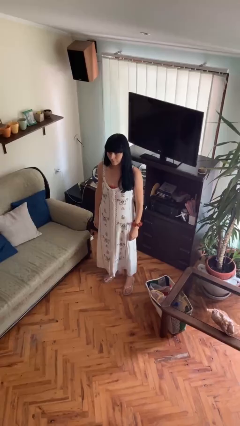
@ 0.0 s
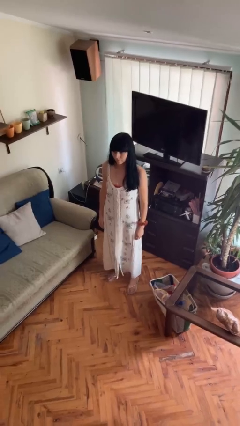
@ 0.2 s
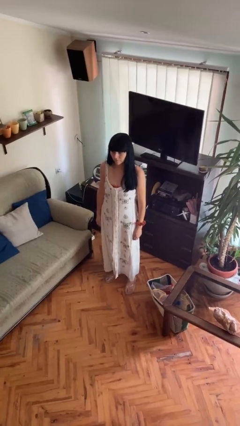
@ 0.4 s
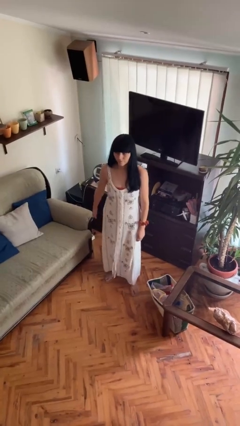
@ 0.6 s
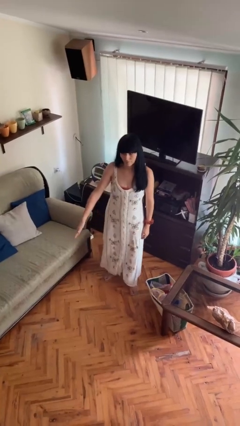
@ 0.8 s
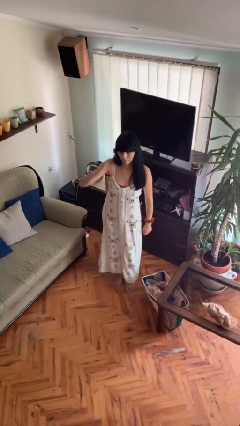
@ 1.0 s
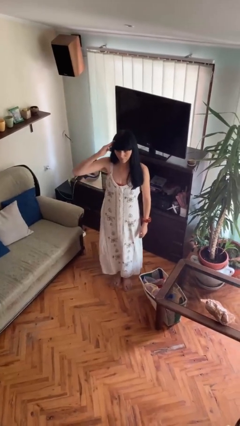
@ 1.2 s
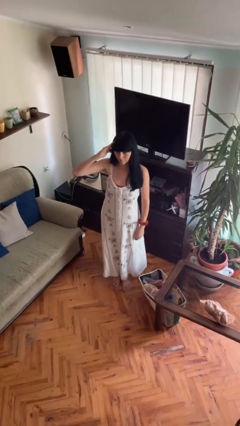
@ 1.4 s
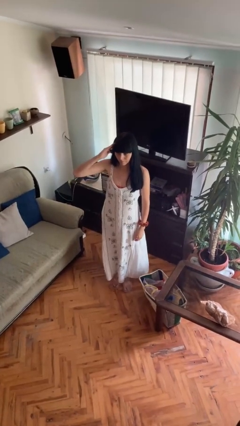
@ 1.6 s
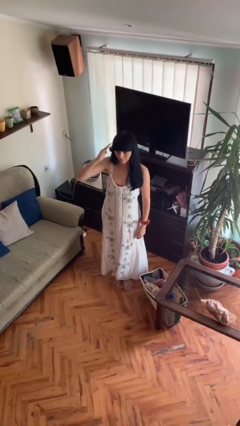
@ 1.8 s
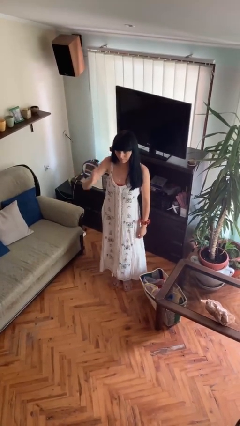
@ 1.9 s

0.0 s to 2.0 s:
person salutes

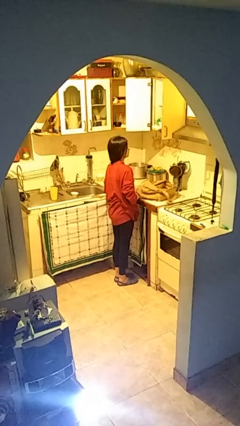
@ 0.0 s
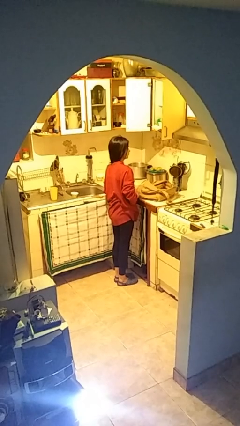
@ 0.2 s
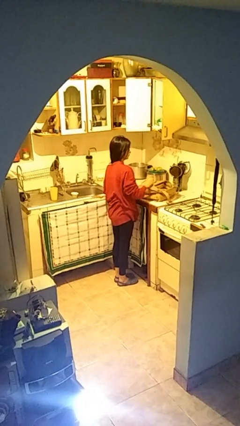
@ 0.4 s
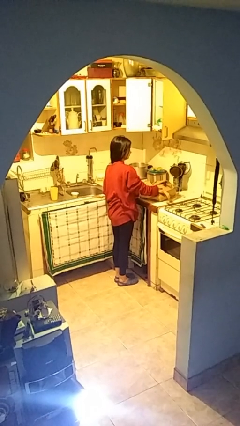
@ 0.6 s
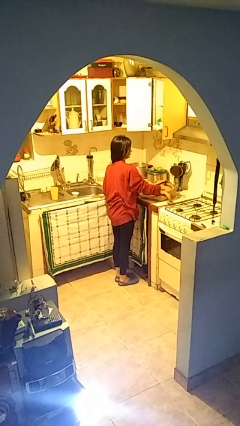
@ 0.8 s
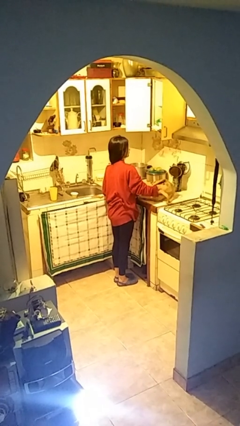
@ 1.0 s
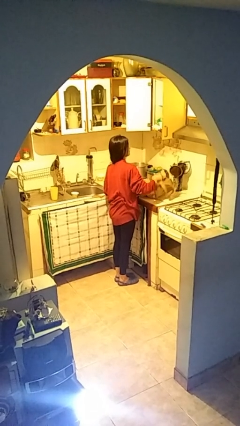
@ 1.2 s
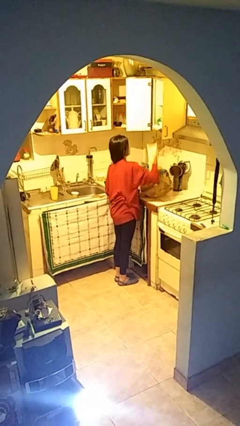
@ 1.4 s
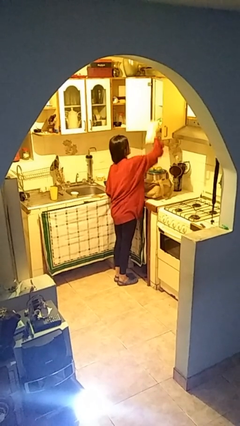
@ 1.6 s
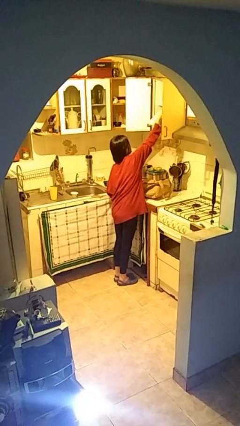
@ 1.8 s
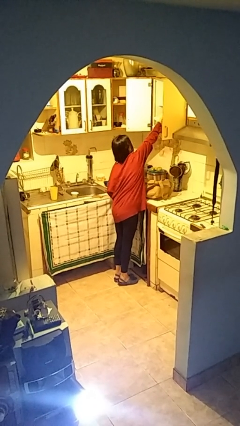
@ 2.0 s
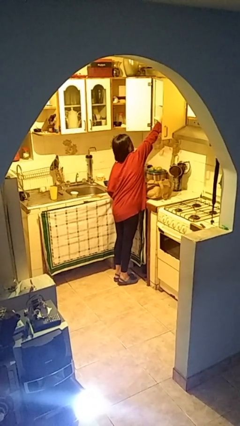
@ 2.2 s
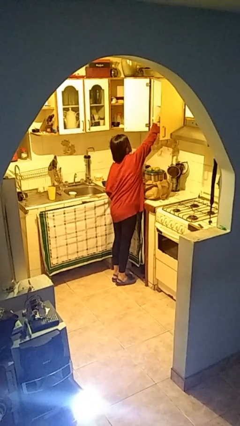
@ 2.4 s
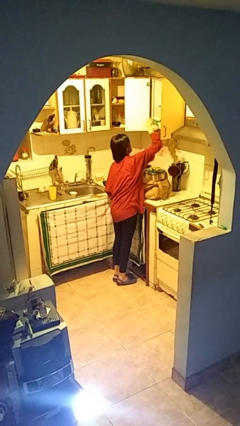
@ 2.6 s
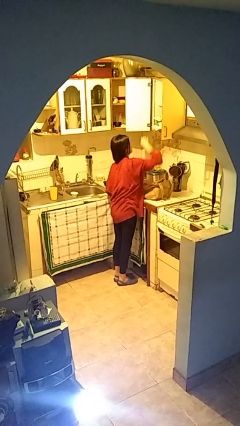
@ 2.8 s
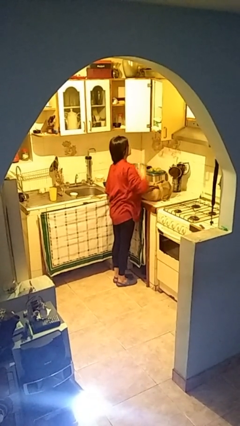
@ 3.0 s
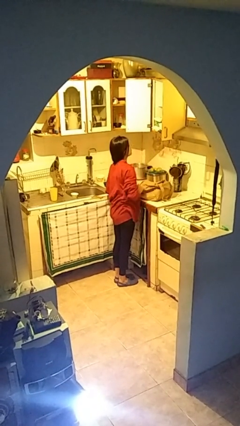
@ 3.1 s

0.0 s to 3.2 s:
person loads groceries into cabinet

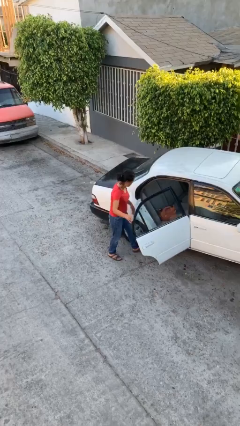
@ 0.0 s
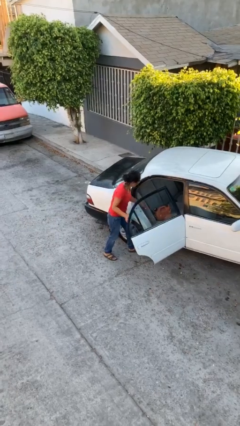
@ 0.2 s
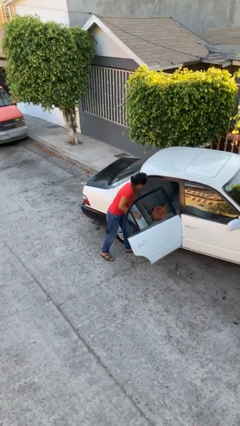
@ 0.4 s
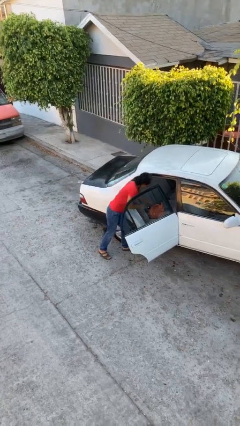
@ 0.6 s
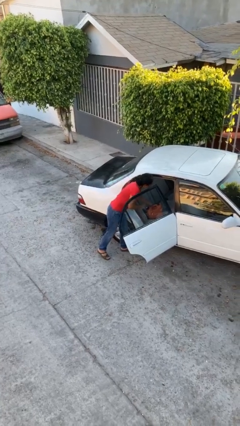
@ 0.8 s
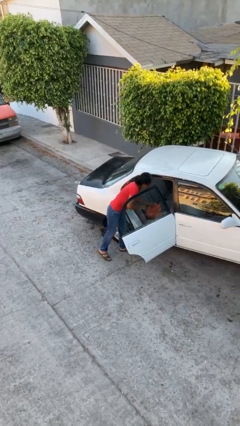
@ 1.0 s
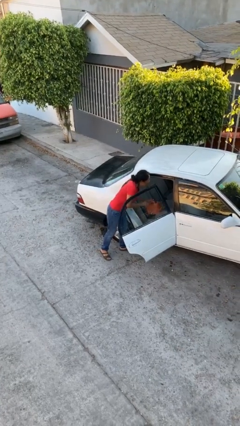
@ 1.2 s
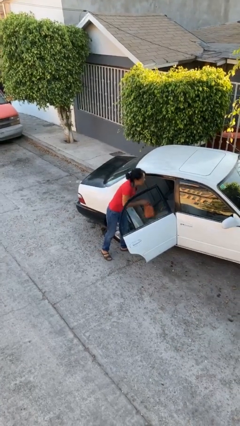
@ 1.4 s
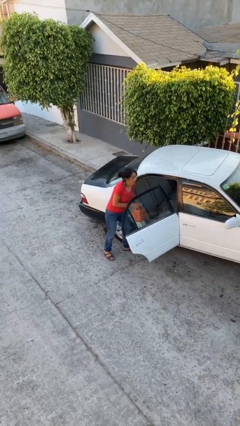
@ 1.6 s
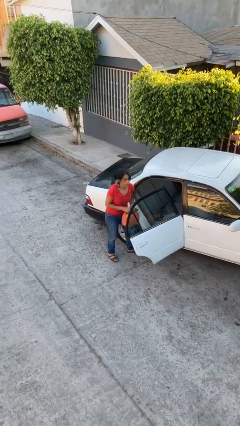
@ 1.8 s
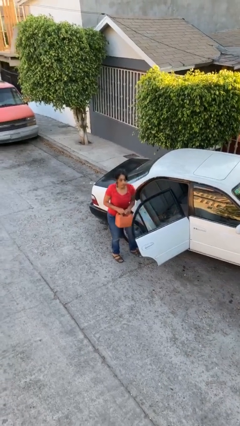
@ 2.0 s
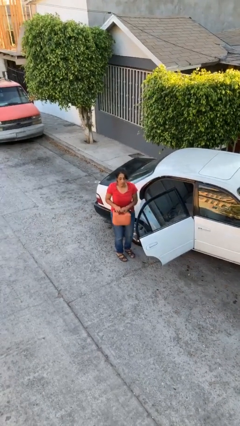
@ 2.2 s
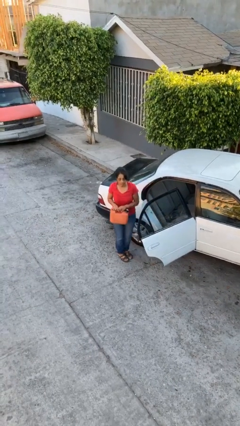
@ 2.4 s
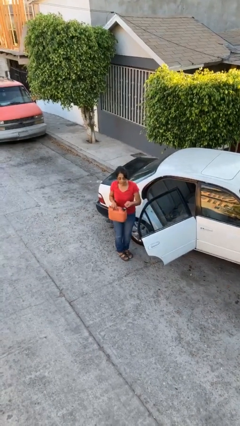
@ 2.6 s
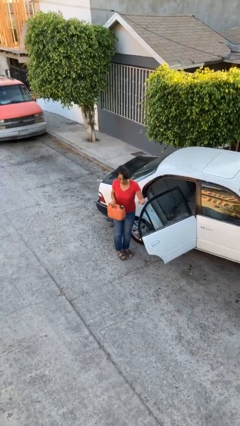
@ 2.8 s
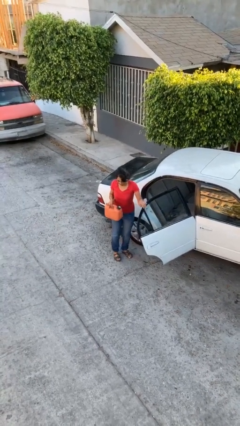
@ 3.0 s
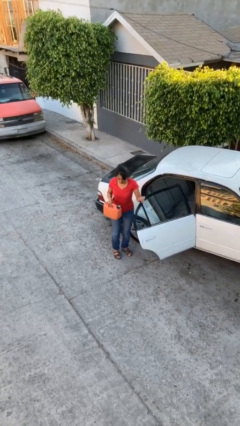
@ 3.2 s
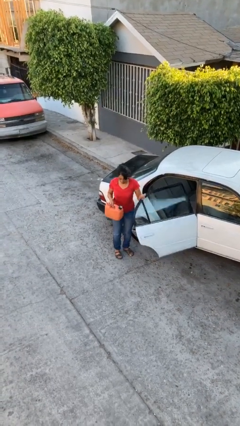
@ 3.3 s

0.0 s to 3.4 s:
person unloads car

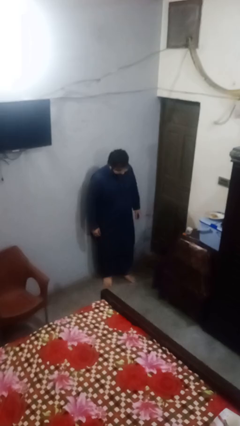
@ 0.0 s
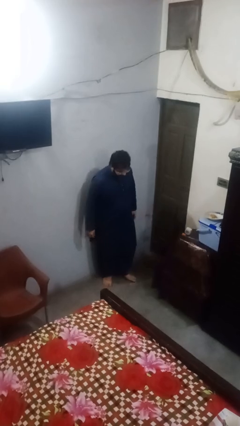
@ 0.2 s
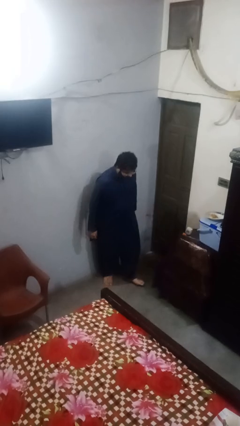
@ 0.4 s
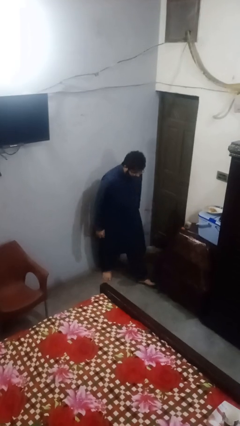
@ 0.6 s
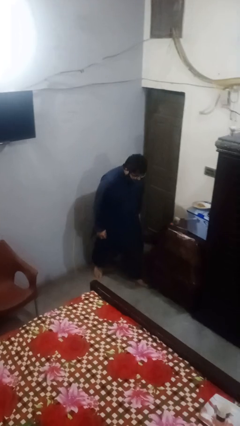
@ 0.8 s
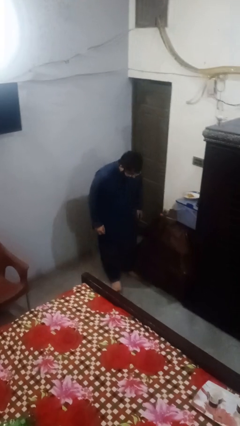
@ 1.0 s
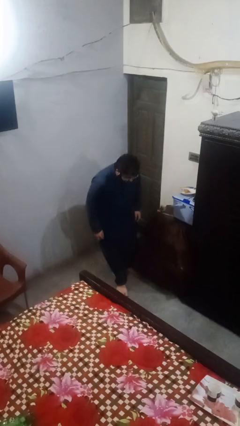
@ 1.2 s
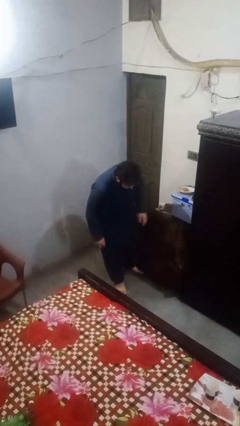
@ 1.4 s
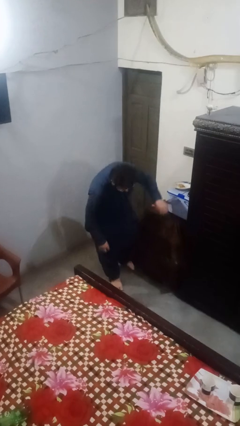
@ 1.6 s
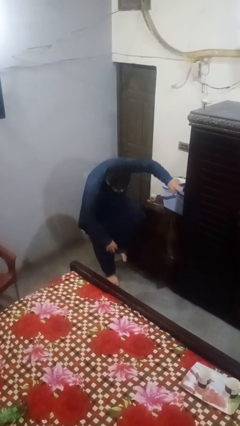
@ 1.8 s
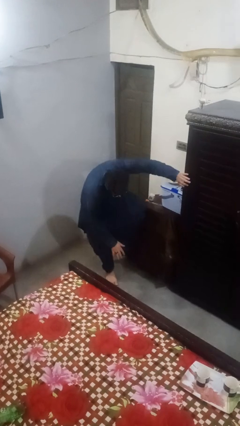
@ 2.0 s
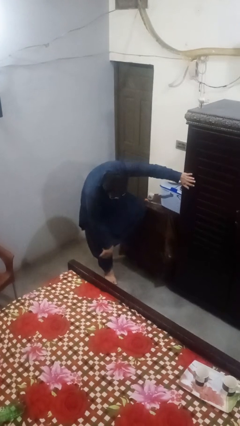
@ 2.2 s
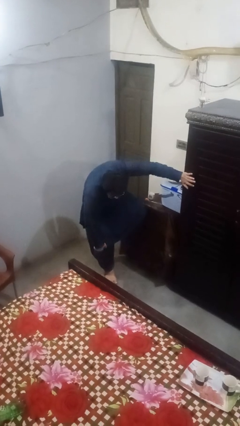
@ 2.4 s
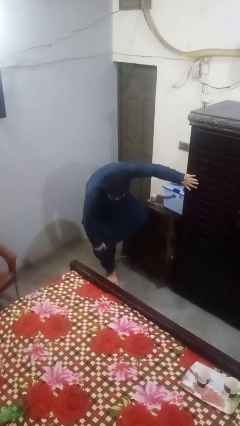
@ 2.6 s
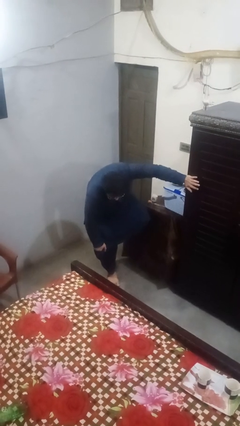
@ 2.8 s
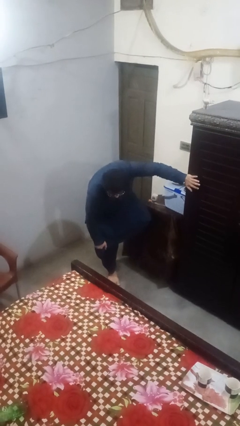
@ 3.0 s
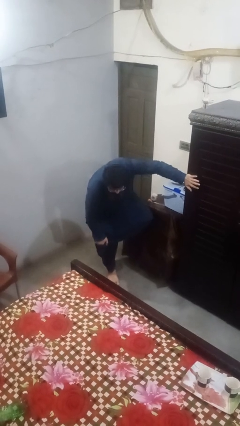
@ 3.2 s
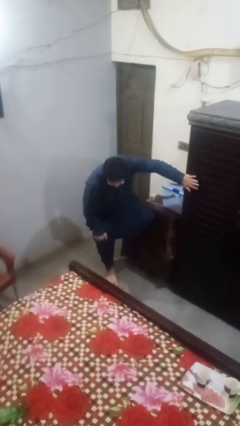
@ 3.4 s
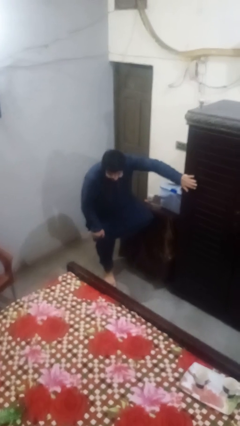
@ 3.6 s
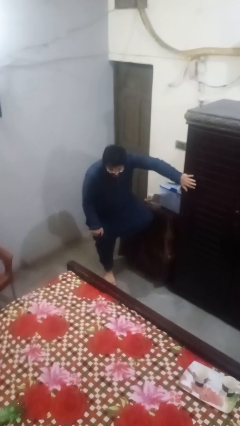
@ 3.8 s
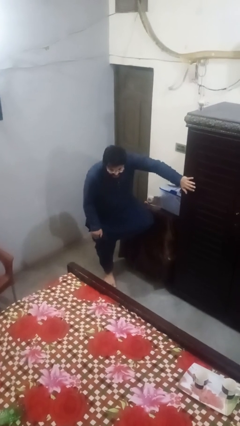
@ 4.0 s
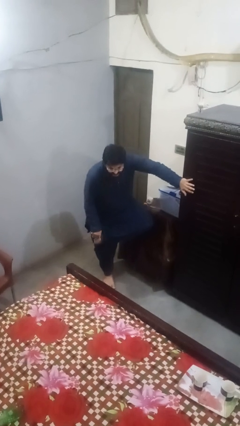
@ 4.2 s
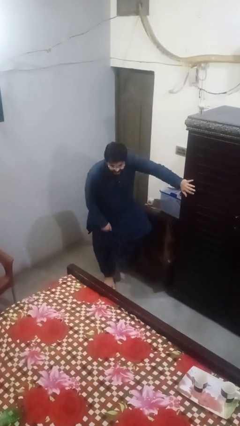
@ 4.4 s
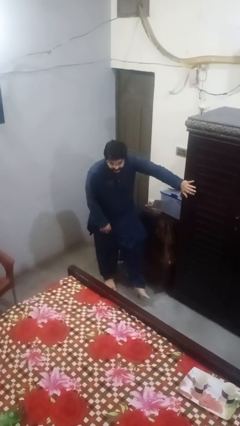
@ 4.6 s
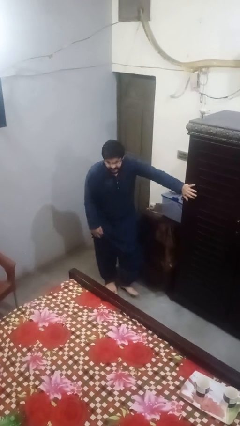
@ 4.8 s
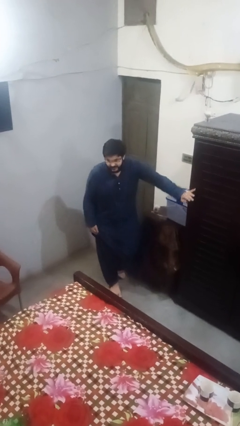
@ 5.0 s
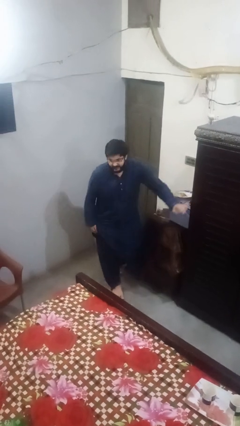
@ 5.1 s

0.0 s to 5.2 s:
person stubs toe

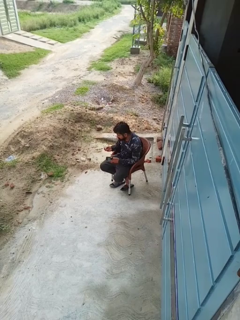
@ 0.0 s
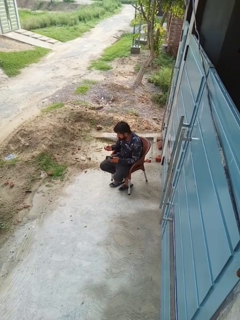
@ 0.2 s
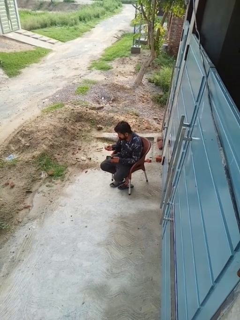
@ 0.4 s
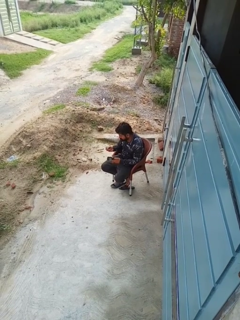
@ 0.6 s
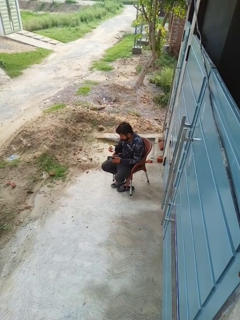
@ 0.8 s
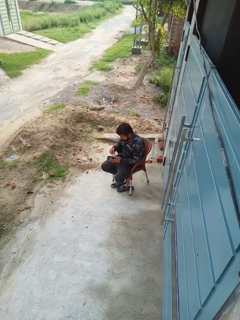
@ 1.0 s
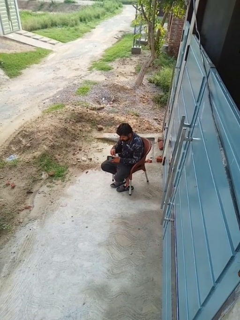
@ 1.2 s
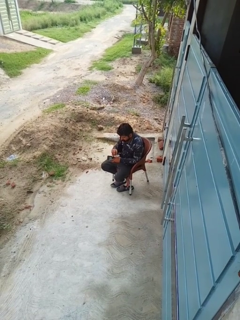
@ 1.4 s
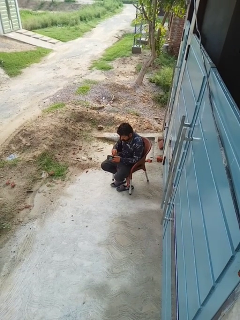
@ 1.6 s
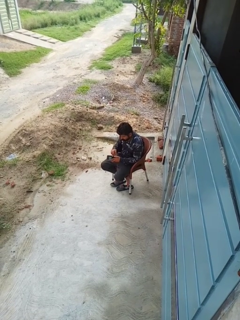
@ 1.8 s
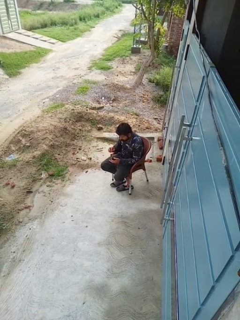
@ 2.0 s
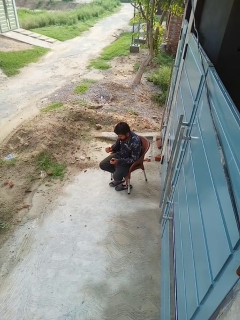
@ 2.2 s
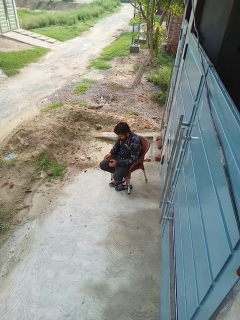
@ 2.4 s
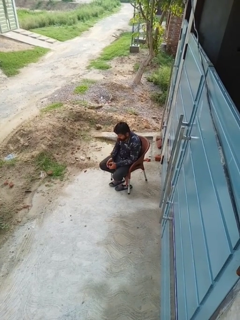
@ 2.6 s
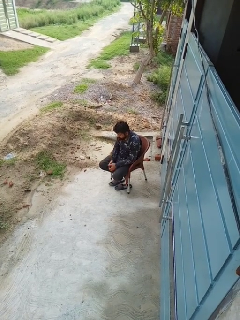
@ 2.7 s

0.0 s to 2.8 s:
person puts object into purse

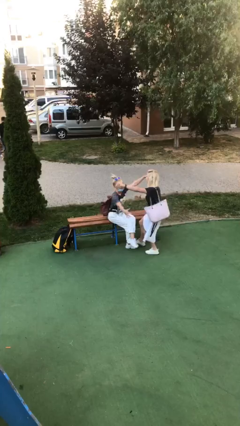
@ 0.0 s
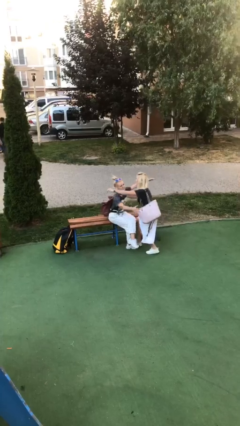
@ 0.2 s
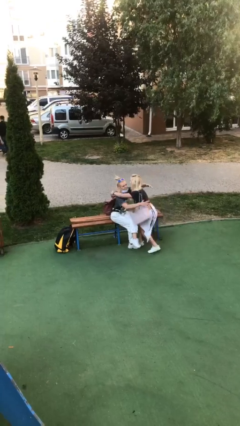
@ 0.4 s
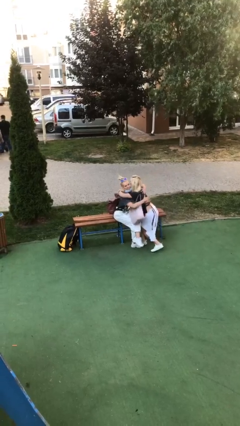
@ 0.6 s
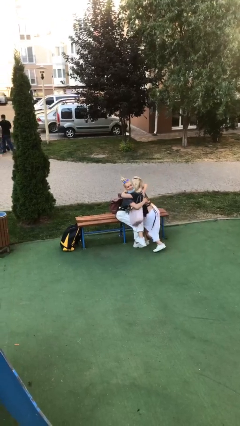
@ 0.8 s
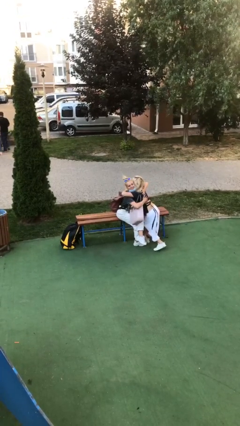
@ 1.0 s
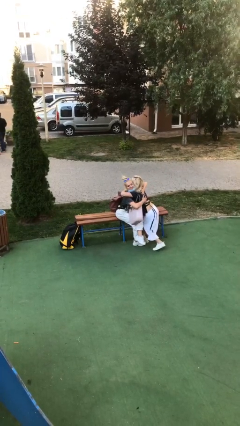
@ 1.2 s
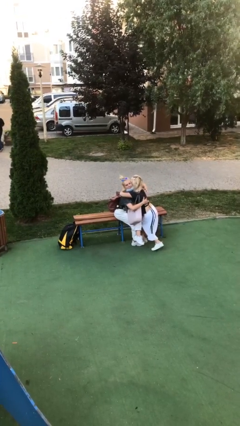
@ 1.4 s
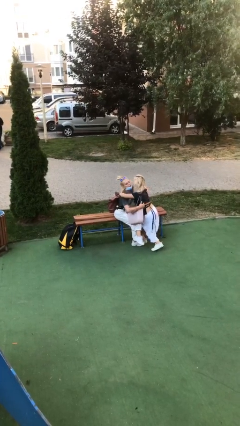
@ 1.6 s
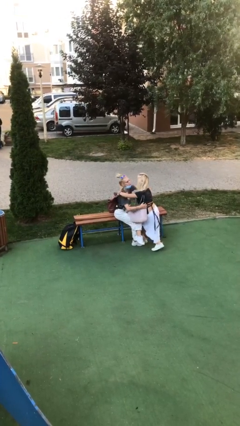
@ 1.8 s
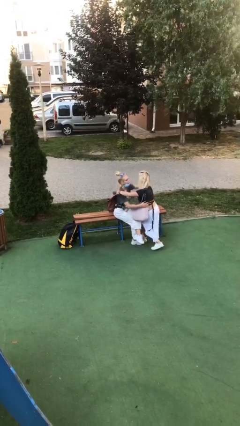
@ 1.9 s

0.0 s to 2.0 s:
person embraces person
